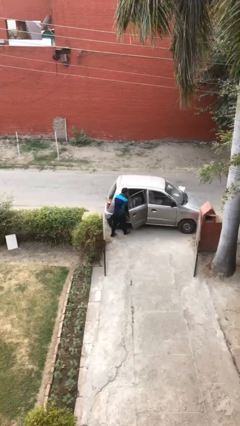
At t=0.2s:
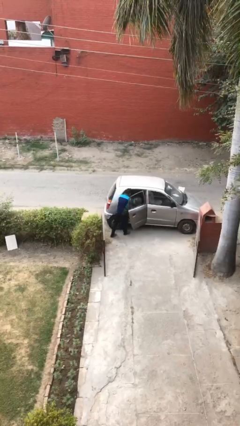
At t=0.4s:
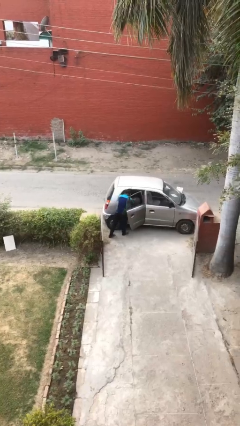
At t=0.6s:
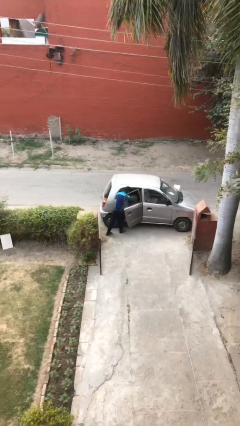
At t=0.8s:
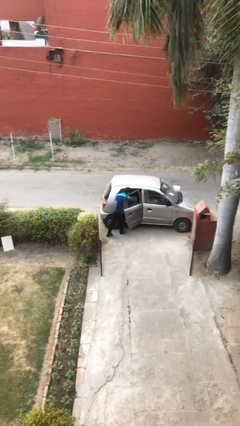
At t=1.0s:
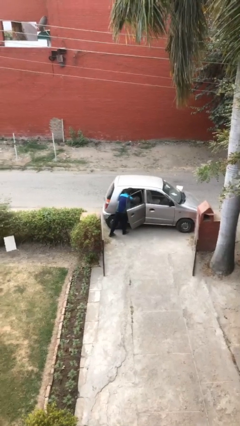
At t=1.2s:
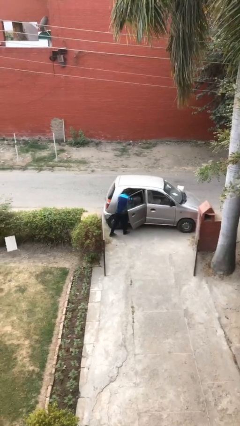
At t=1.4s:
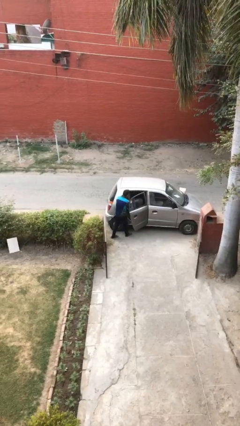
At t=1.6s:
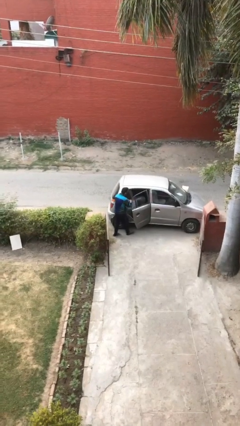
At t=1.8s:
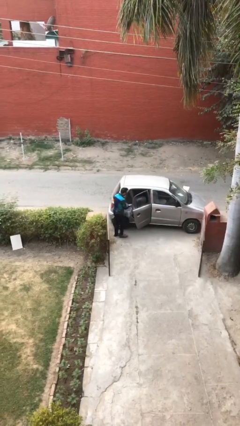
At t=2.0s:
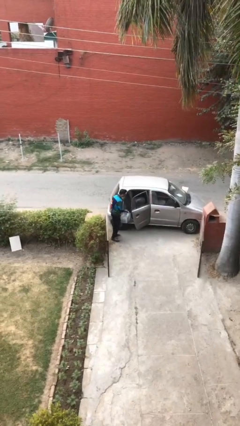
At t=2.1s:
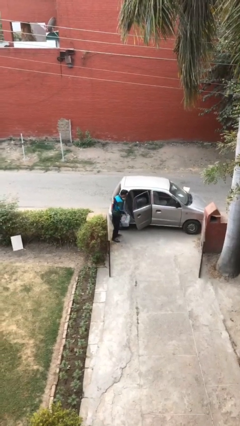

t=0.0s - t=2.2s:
person unloads car

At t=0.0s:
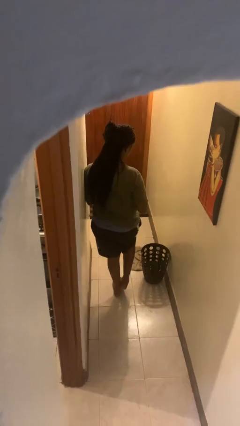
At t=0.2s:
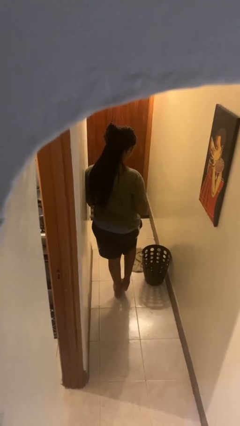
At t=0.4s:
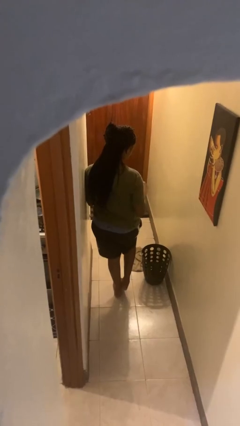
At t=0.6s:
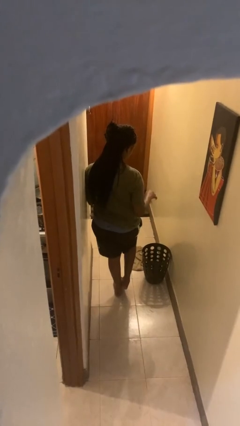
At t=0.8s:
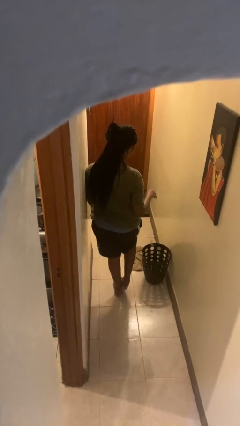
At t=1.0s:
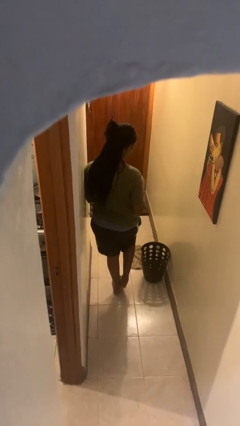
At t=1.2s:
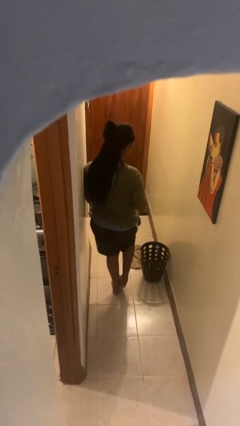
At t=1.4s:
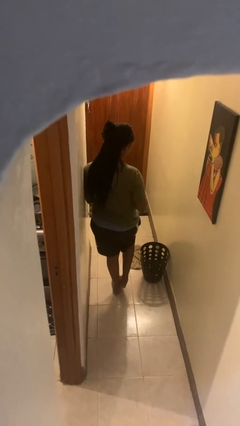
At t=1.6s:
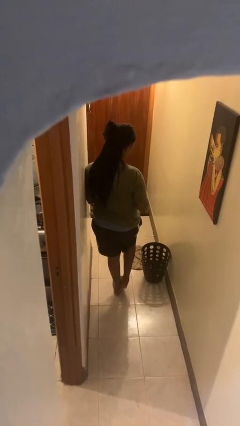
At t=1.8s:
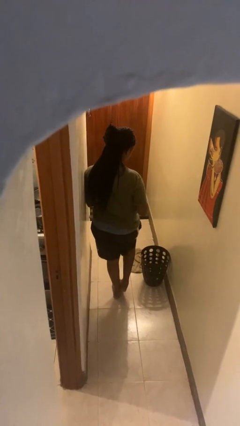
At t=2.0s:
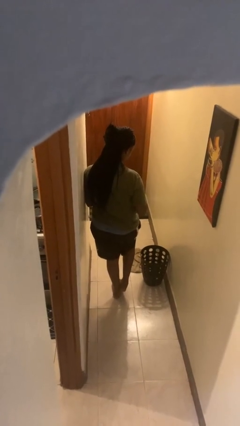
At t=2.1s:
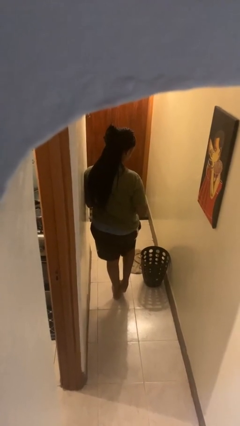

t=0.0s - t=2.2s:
person discards trash

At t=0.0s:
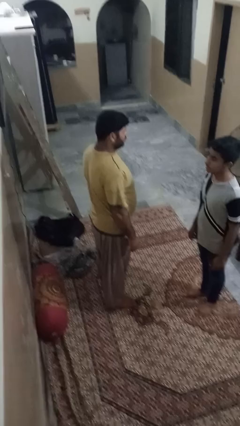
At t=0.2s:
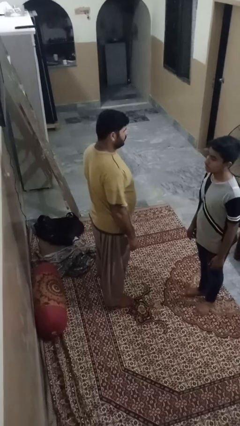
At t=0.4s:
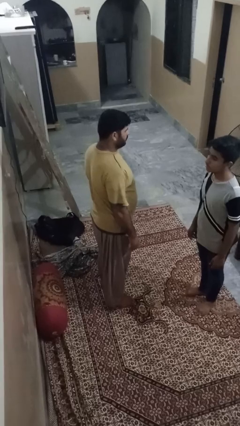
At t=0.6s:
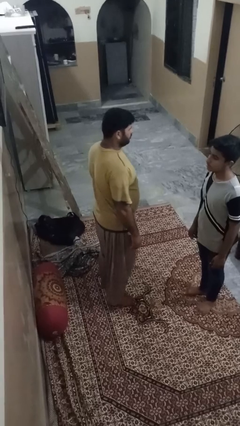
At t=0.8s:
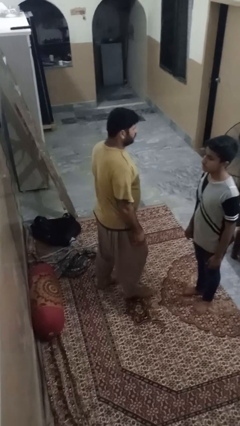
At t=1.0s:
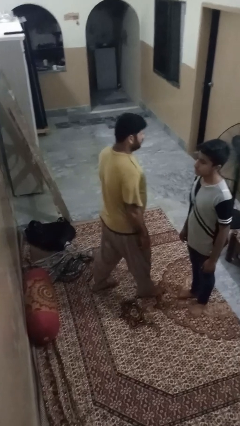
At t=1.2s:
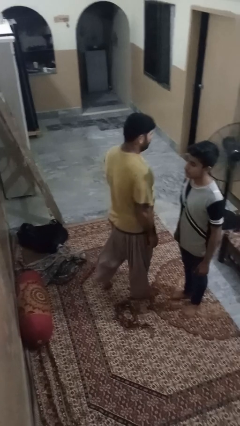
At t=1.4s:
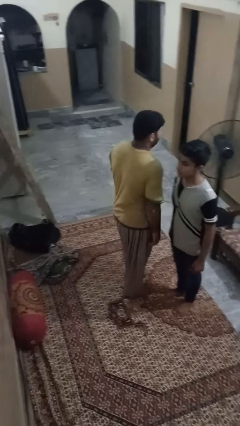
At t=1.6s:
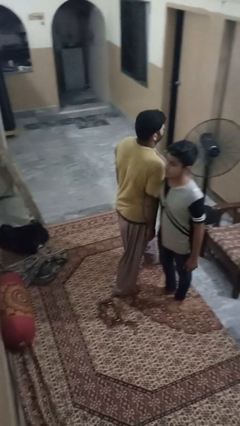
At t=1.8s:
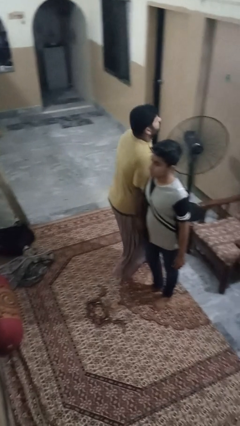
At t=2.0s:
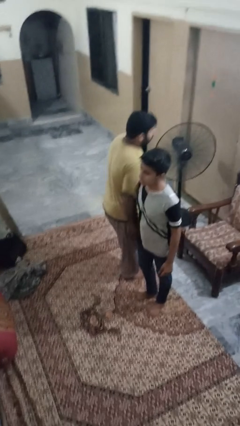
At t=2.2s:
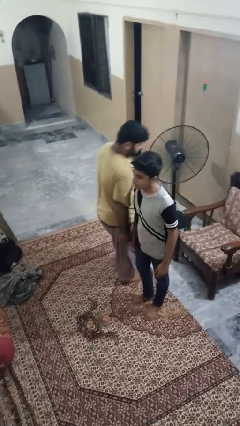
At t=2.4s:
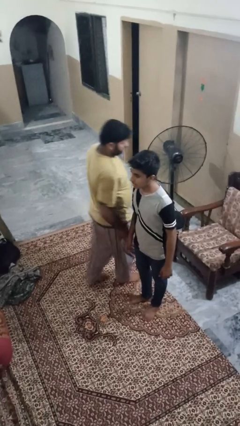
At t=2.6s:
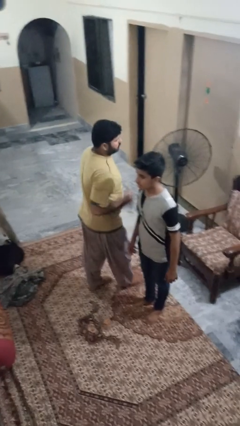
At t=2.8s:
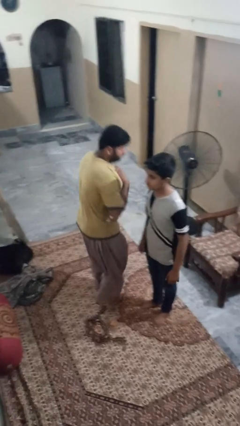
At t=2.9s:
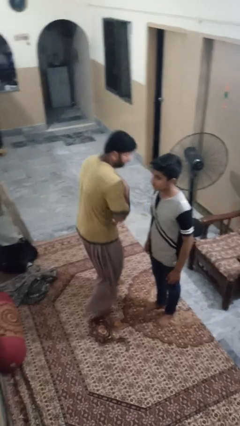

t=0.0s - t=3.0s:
person bumps into person

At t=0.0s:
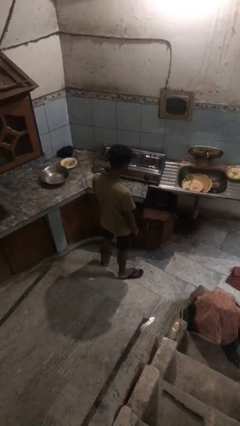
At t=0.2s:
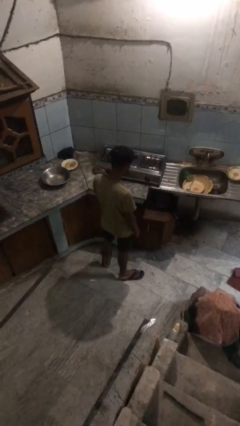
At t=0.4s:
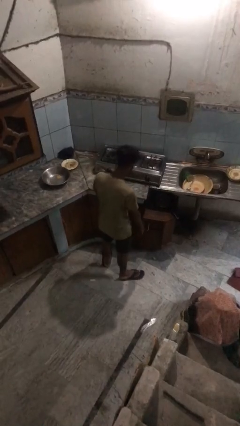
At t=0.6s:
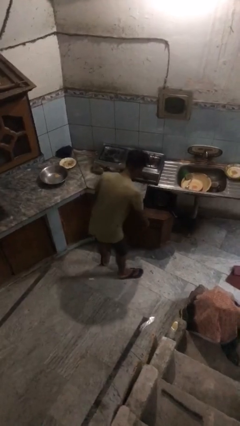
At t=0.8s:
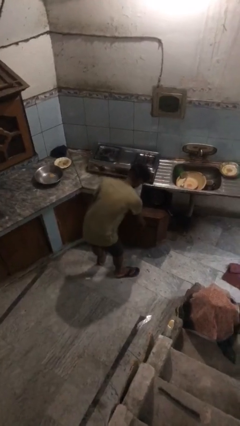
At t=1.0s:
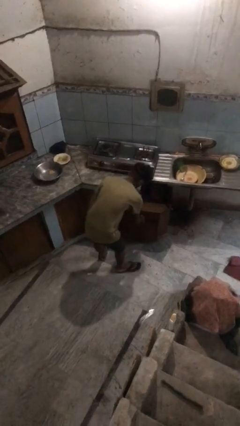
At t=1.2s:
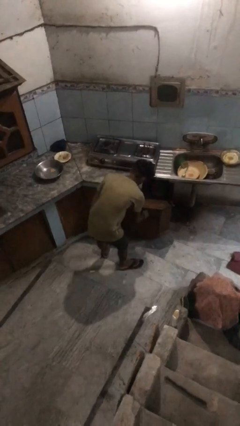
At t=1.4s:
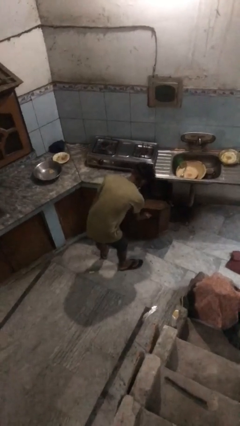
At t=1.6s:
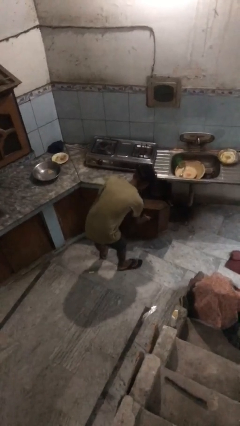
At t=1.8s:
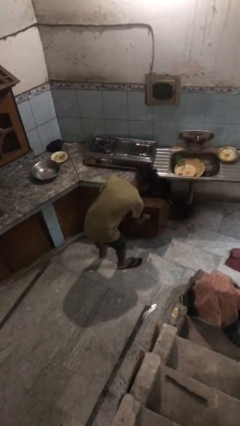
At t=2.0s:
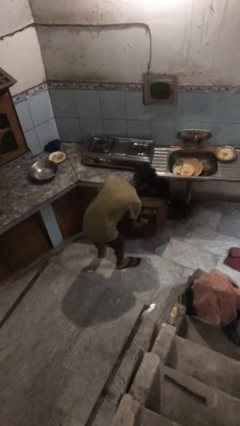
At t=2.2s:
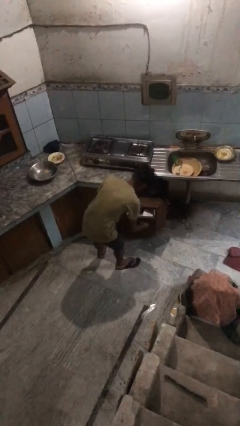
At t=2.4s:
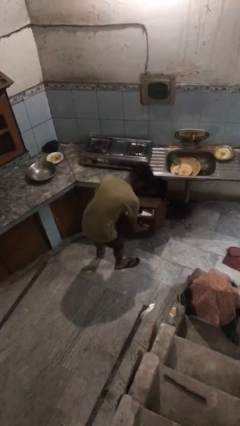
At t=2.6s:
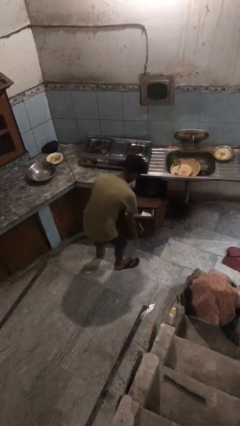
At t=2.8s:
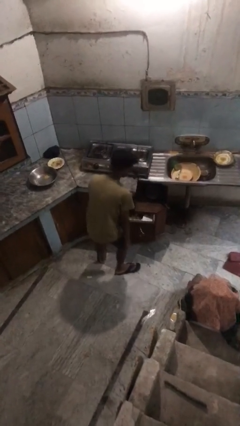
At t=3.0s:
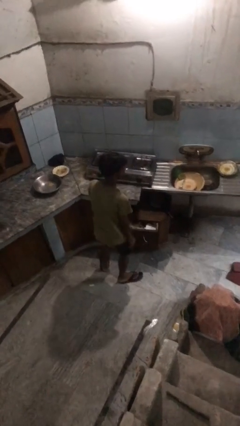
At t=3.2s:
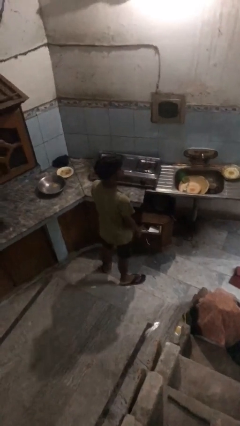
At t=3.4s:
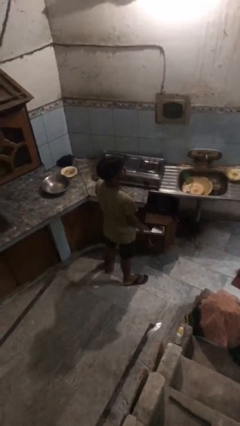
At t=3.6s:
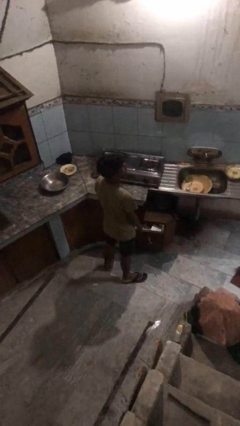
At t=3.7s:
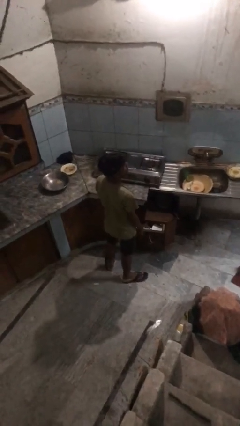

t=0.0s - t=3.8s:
person opens kitchen drawer

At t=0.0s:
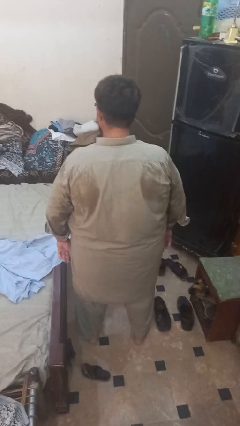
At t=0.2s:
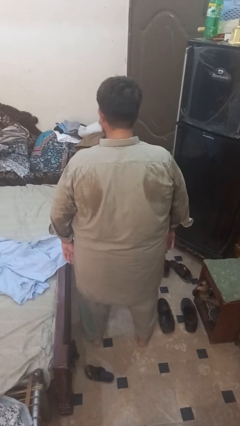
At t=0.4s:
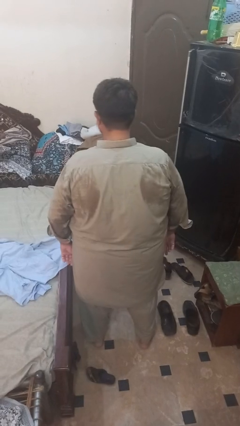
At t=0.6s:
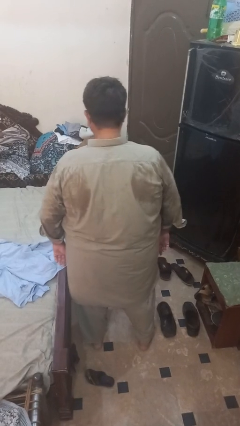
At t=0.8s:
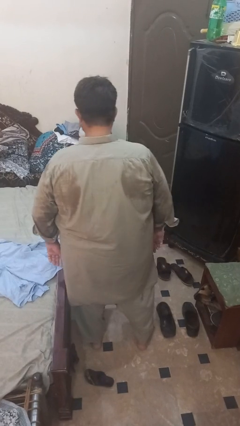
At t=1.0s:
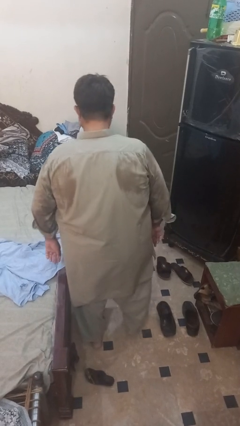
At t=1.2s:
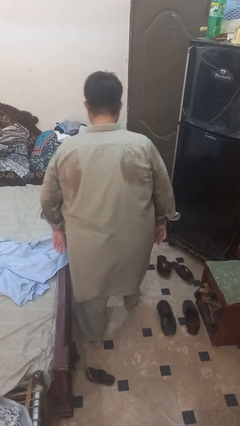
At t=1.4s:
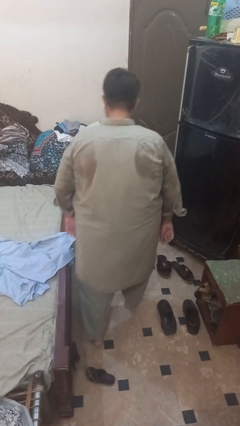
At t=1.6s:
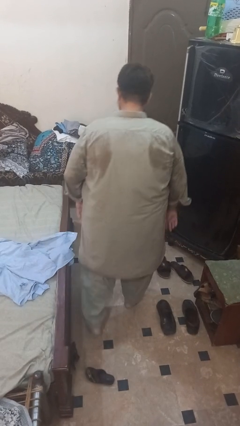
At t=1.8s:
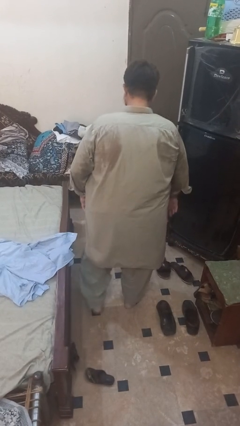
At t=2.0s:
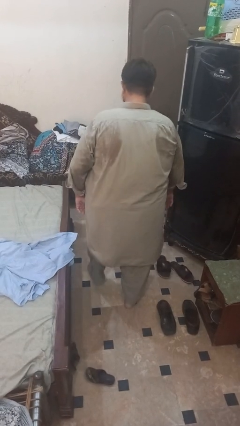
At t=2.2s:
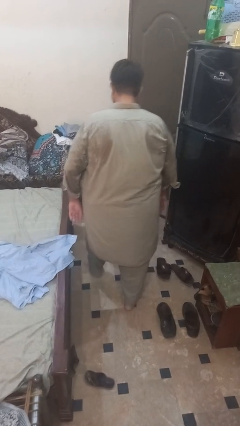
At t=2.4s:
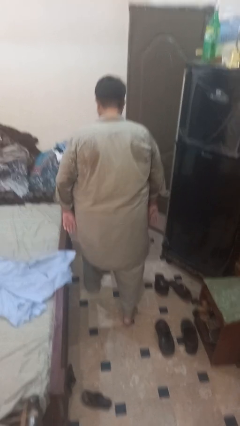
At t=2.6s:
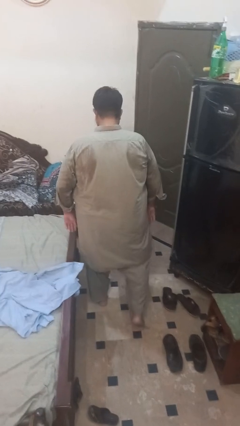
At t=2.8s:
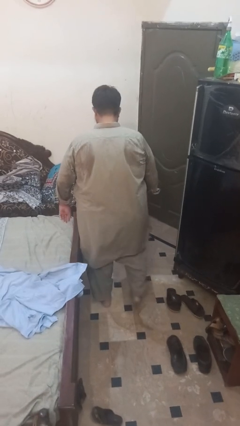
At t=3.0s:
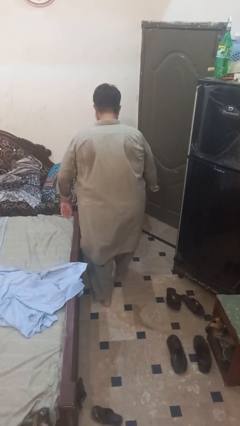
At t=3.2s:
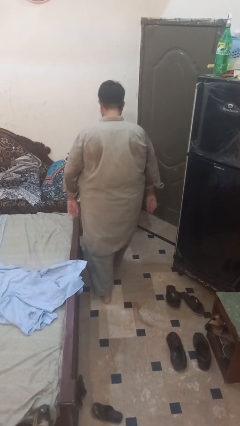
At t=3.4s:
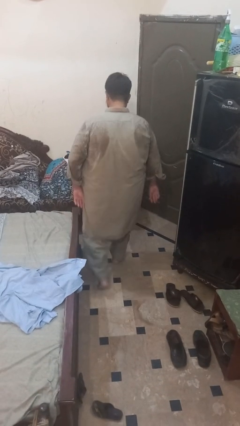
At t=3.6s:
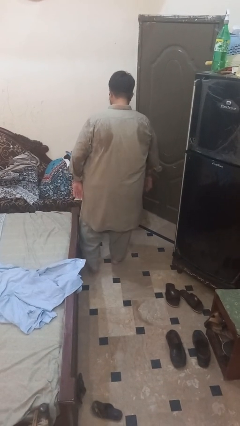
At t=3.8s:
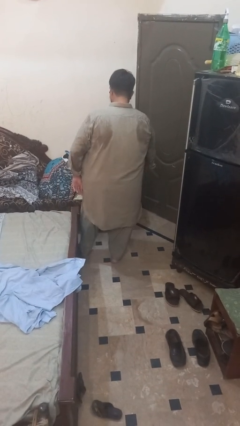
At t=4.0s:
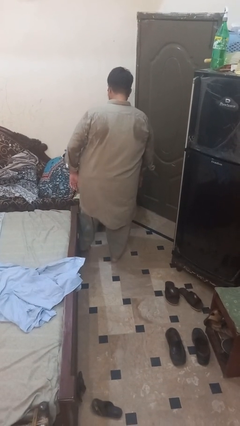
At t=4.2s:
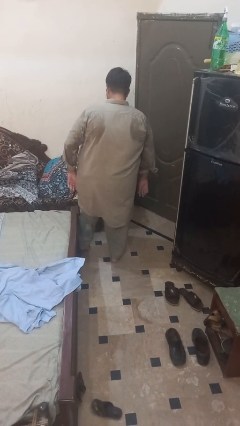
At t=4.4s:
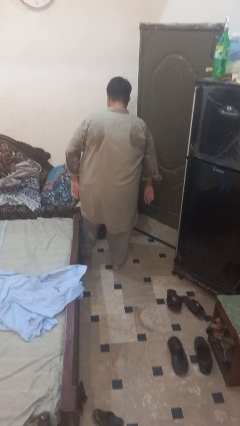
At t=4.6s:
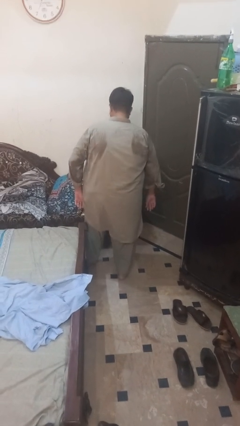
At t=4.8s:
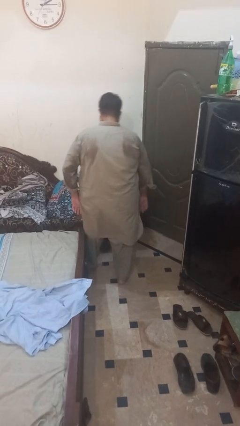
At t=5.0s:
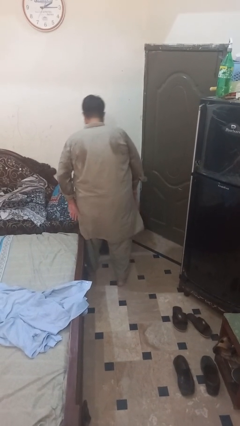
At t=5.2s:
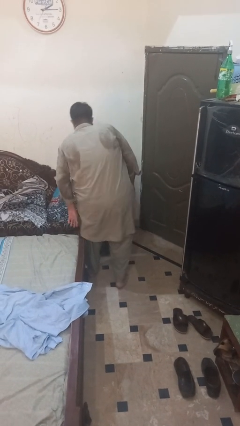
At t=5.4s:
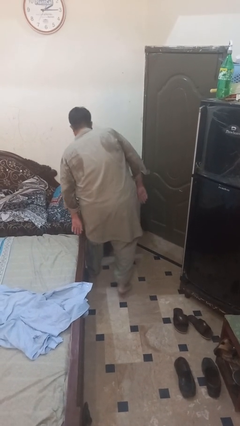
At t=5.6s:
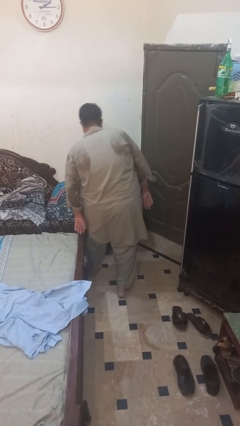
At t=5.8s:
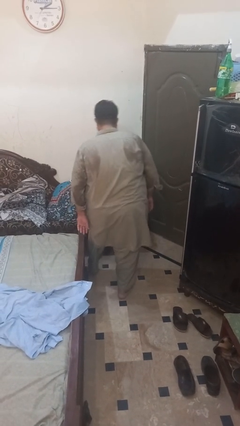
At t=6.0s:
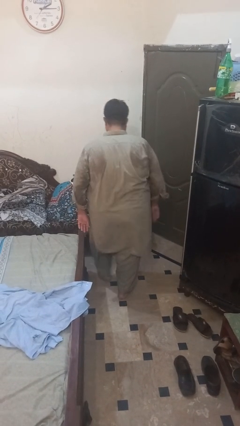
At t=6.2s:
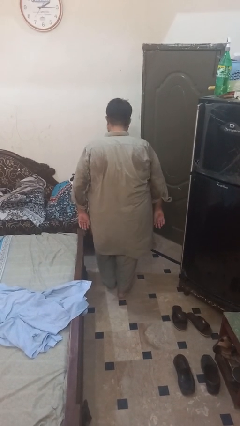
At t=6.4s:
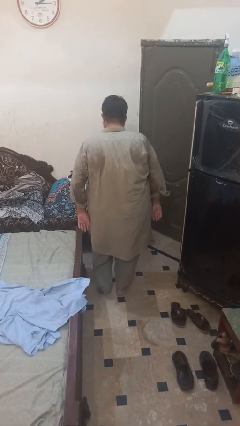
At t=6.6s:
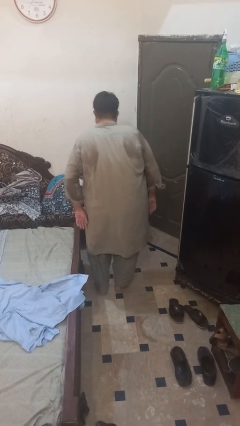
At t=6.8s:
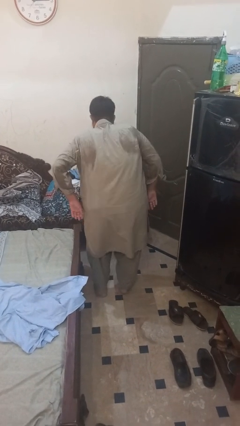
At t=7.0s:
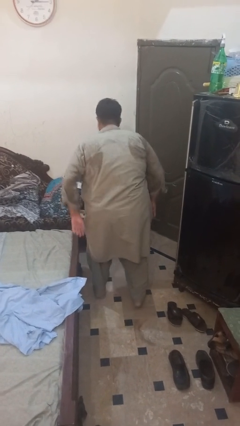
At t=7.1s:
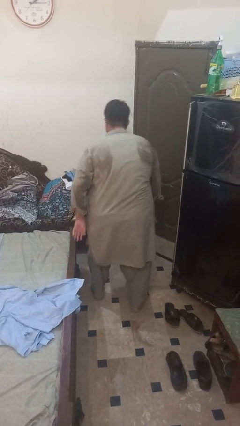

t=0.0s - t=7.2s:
person stubs toe
